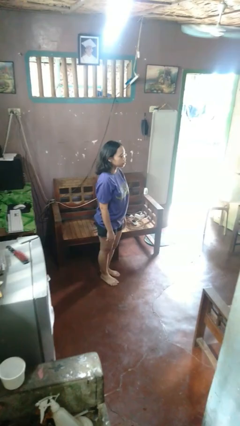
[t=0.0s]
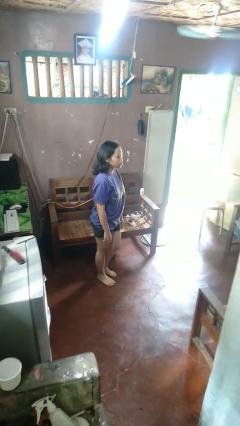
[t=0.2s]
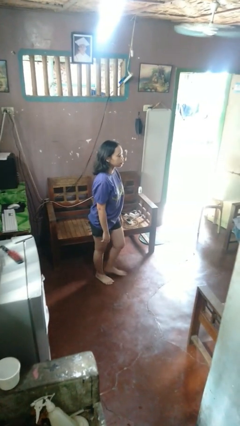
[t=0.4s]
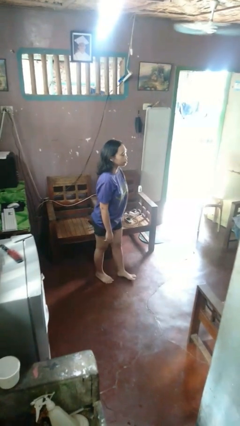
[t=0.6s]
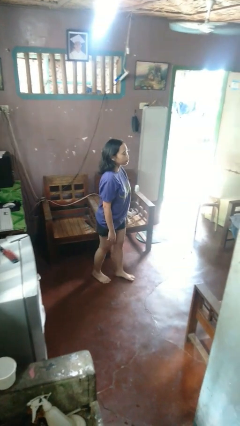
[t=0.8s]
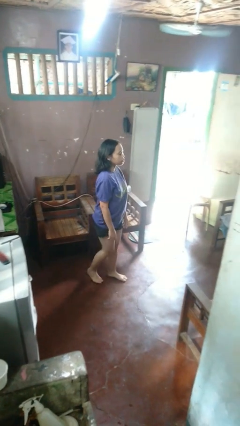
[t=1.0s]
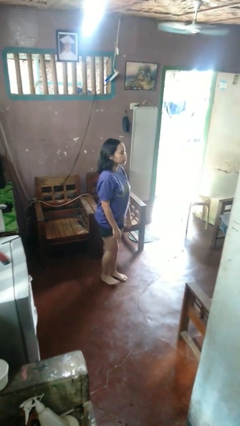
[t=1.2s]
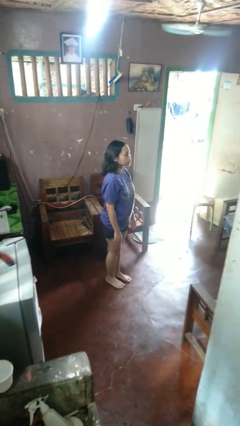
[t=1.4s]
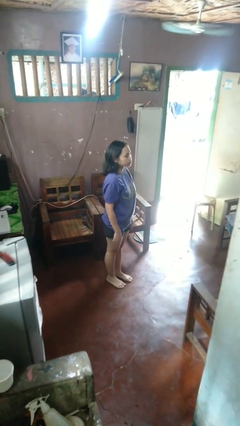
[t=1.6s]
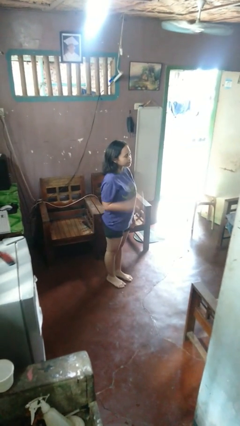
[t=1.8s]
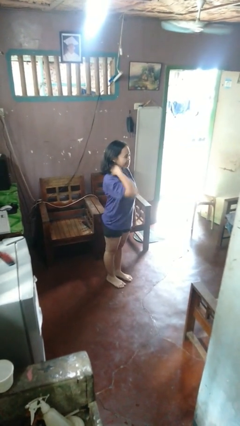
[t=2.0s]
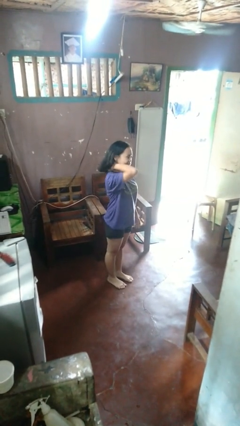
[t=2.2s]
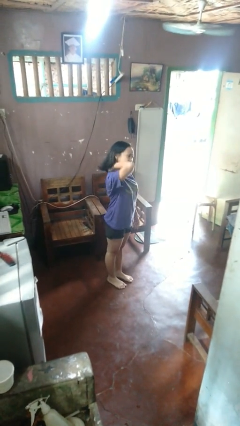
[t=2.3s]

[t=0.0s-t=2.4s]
person rubs neck

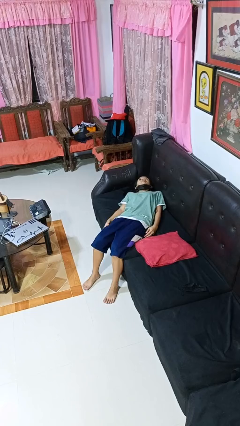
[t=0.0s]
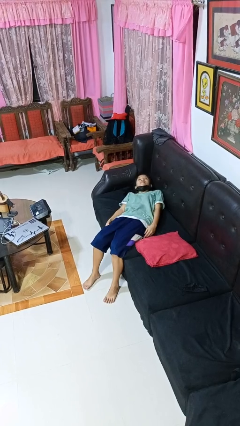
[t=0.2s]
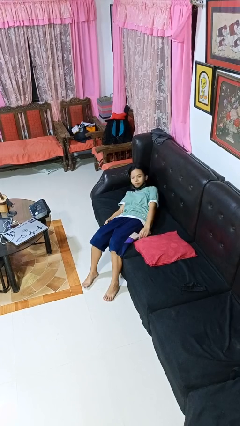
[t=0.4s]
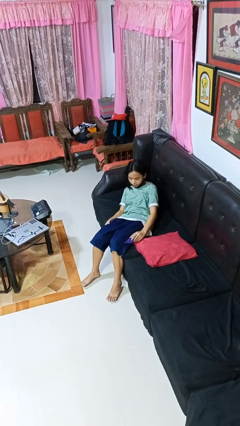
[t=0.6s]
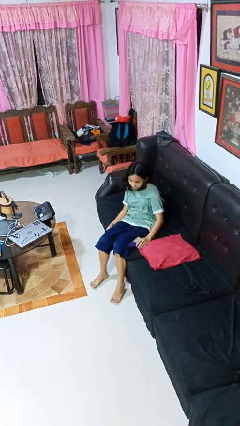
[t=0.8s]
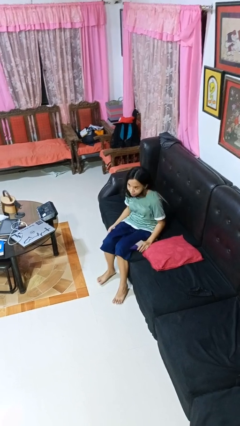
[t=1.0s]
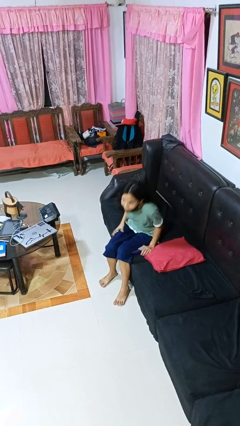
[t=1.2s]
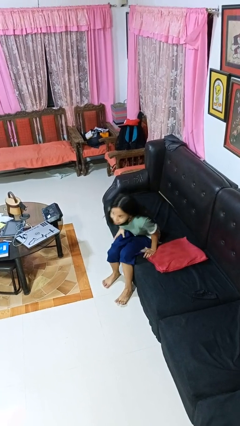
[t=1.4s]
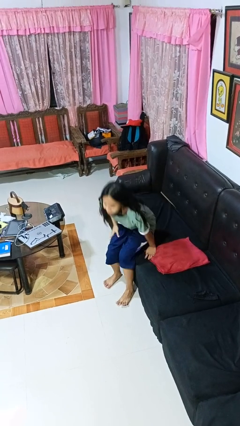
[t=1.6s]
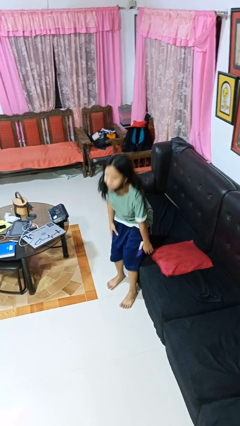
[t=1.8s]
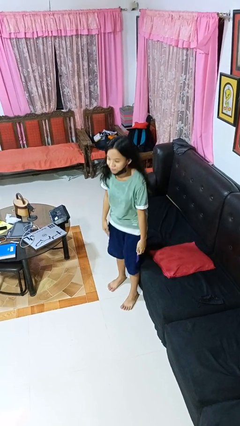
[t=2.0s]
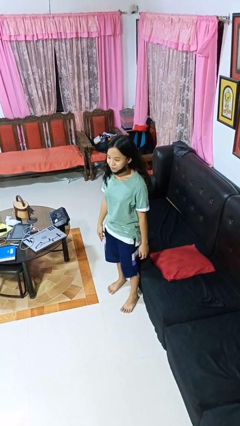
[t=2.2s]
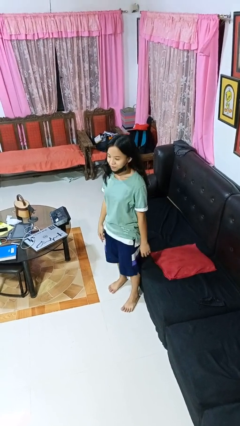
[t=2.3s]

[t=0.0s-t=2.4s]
person stands up

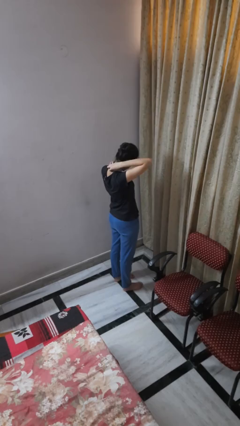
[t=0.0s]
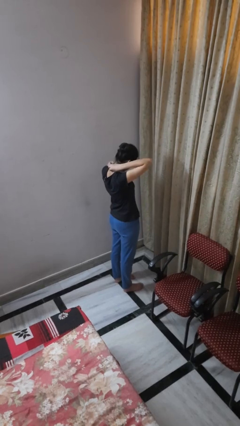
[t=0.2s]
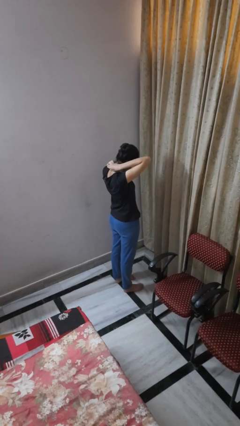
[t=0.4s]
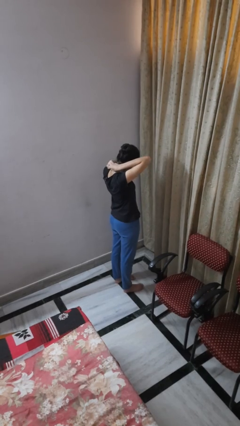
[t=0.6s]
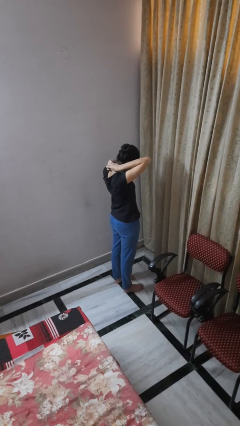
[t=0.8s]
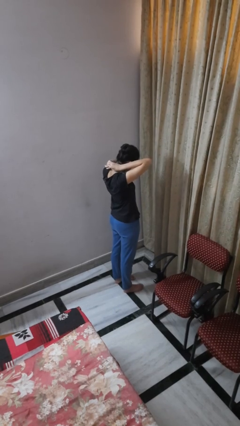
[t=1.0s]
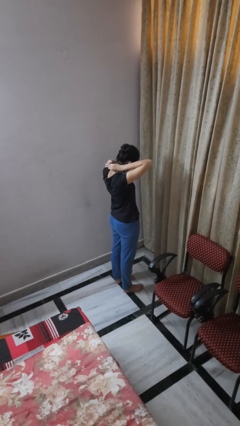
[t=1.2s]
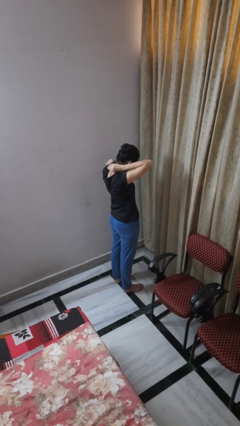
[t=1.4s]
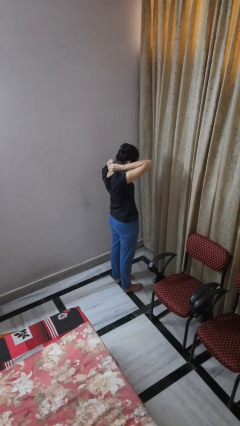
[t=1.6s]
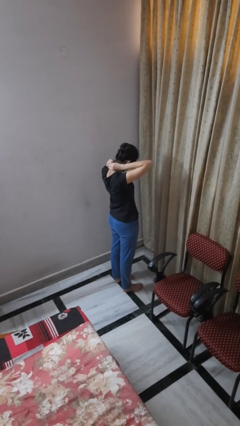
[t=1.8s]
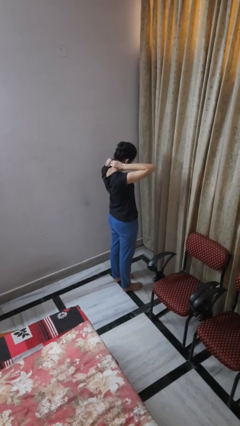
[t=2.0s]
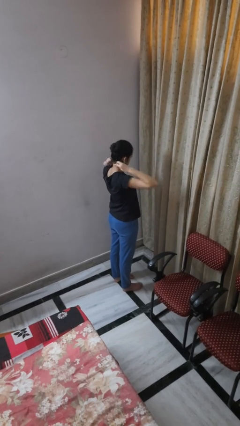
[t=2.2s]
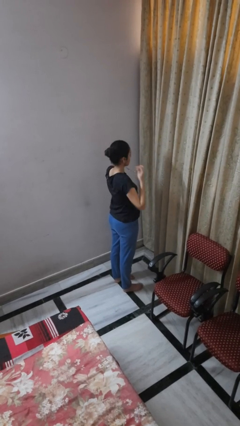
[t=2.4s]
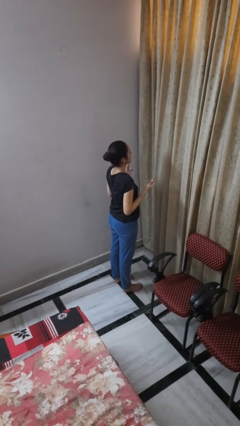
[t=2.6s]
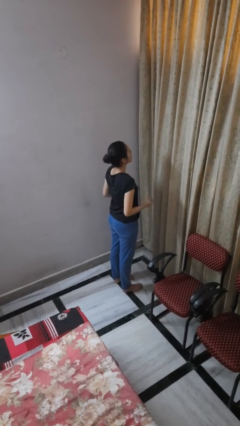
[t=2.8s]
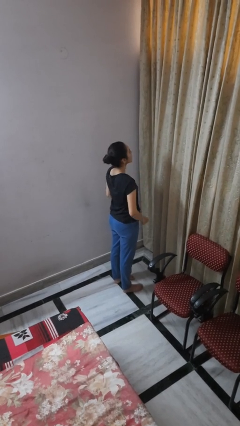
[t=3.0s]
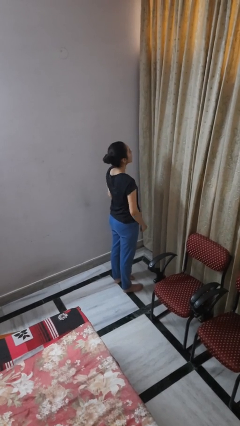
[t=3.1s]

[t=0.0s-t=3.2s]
person takes off necklace

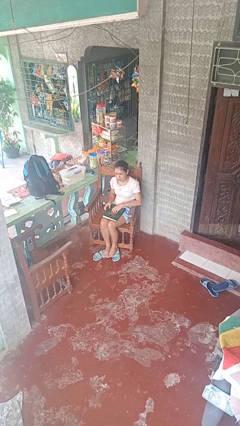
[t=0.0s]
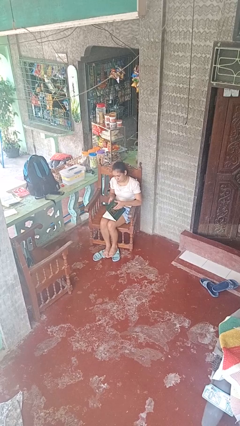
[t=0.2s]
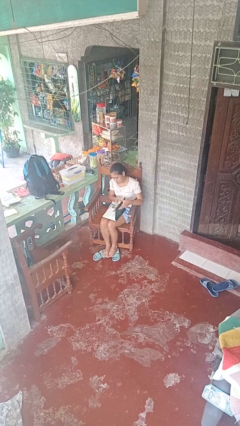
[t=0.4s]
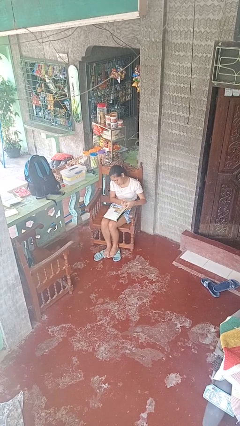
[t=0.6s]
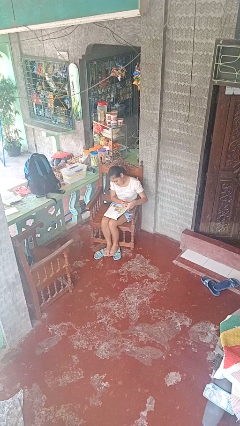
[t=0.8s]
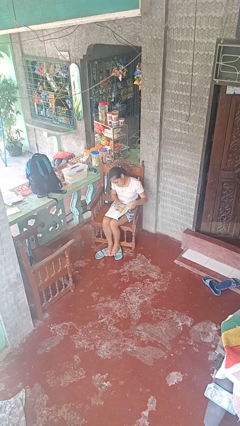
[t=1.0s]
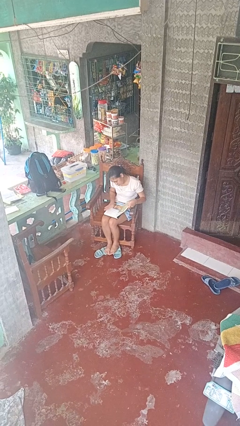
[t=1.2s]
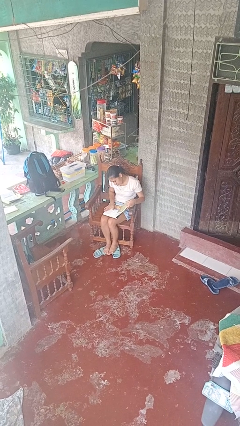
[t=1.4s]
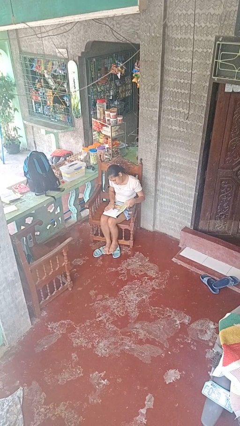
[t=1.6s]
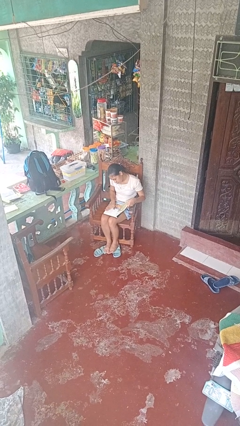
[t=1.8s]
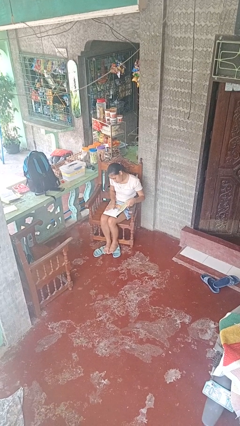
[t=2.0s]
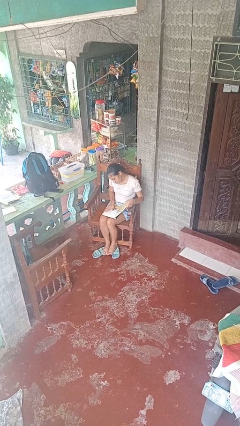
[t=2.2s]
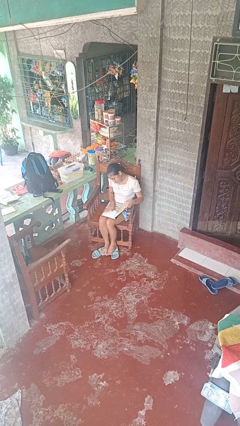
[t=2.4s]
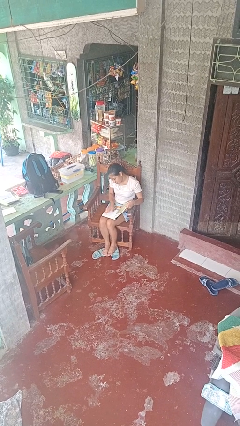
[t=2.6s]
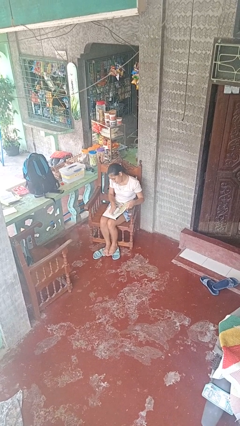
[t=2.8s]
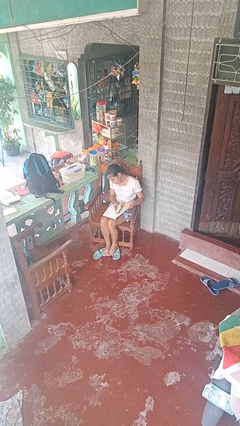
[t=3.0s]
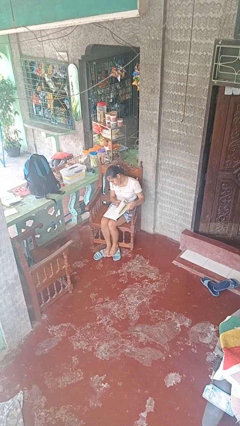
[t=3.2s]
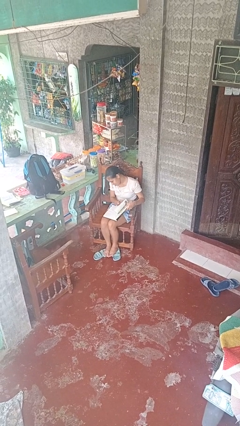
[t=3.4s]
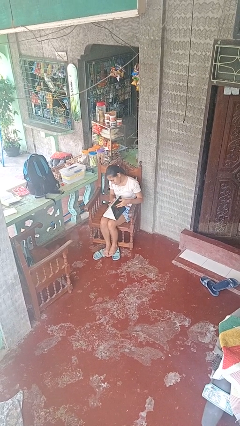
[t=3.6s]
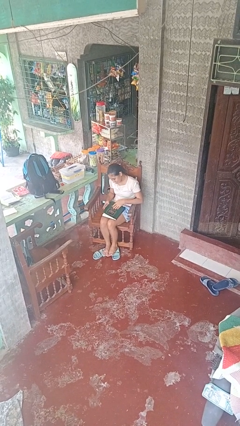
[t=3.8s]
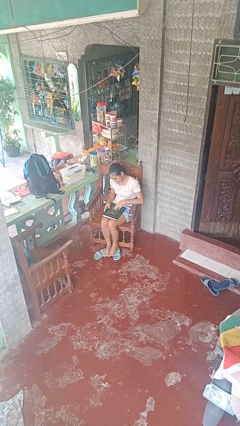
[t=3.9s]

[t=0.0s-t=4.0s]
person reads book

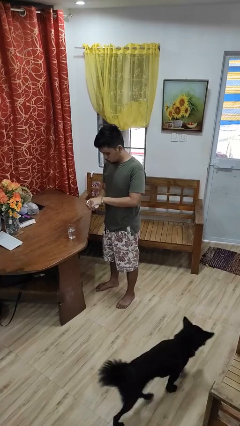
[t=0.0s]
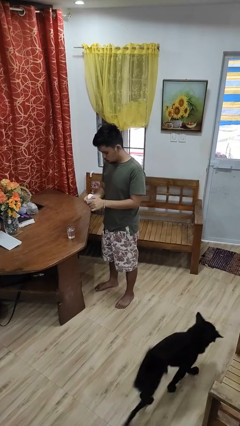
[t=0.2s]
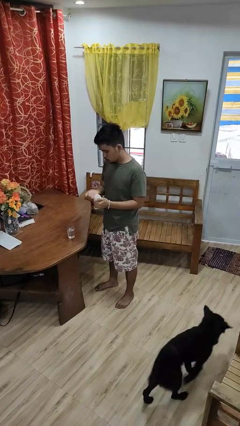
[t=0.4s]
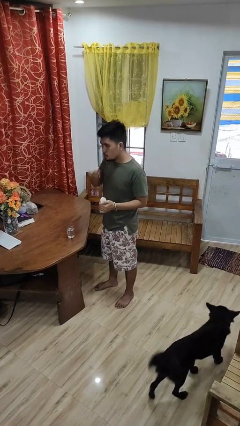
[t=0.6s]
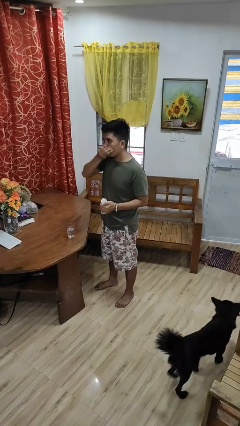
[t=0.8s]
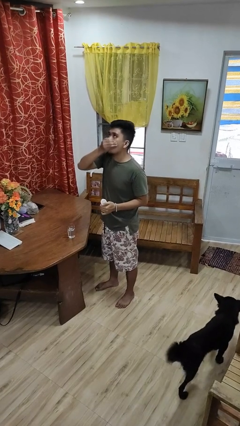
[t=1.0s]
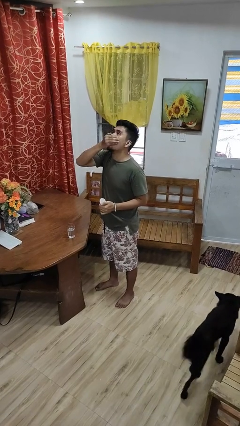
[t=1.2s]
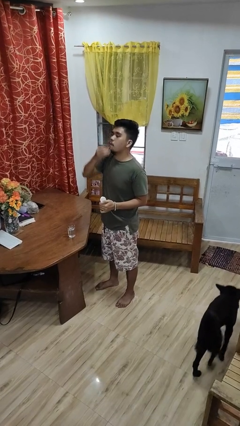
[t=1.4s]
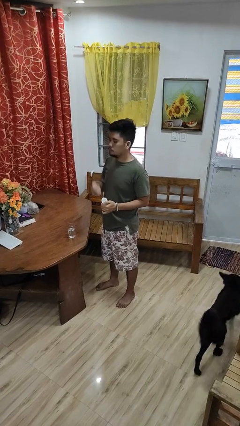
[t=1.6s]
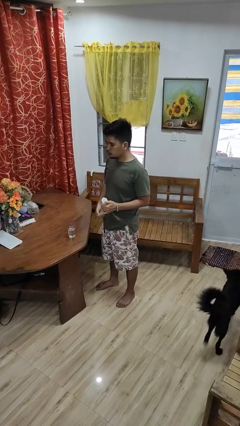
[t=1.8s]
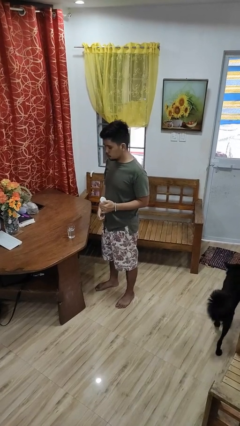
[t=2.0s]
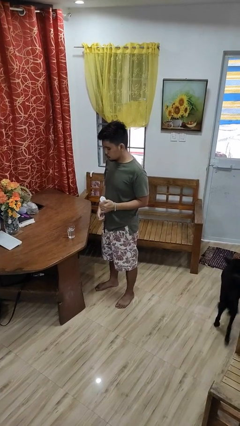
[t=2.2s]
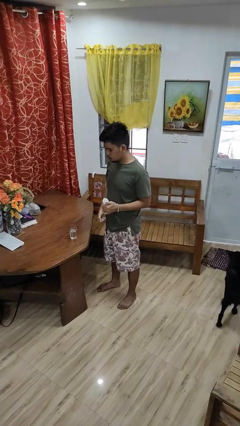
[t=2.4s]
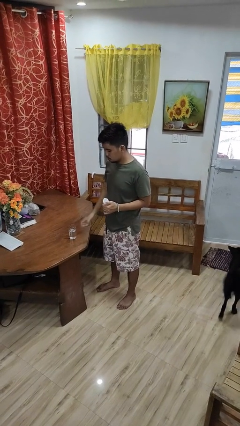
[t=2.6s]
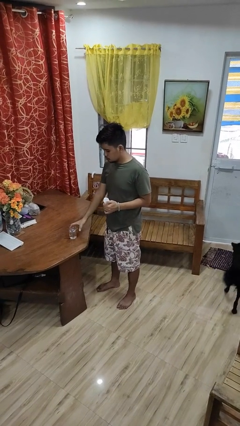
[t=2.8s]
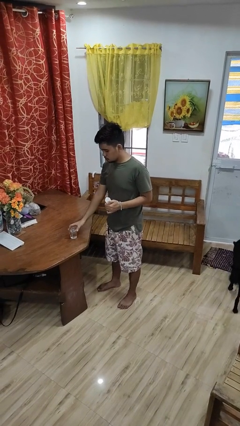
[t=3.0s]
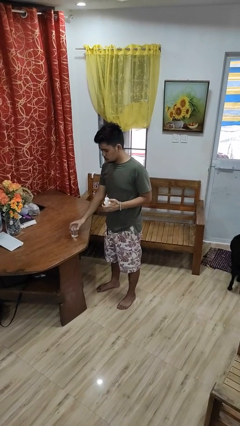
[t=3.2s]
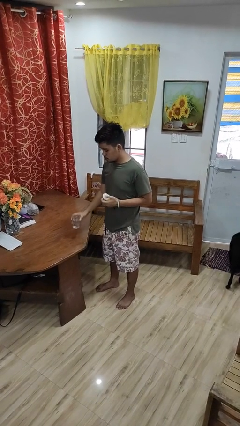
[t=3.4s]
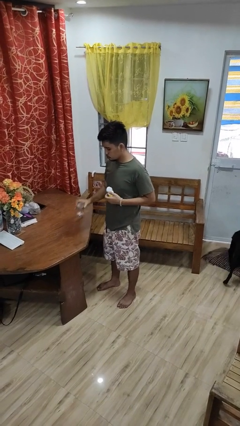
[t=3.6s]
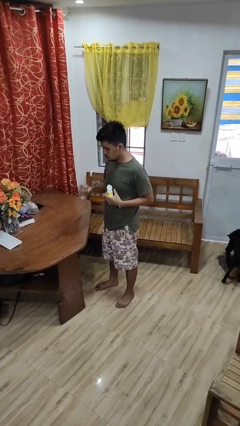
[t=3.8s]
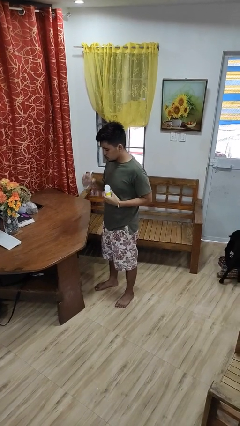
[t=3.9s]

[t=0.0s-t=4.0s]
person takes medicine pills

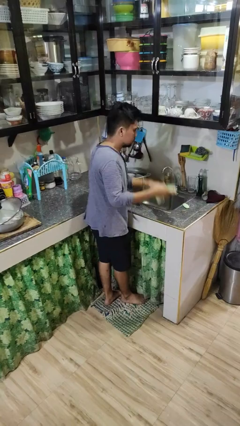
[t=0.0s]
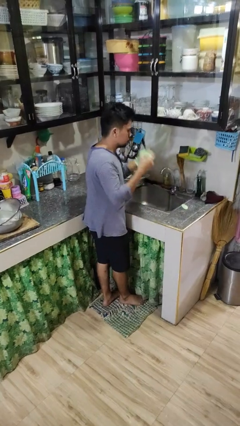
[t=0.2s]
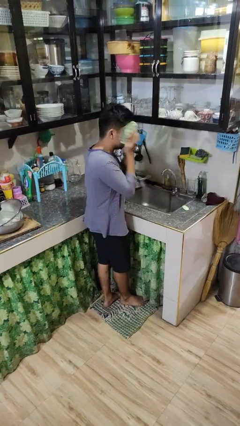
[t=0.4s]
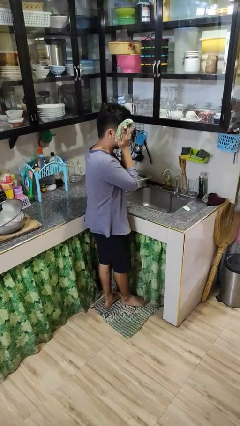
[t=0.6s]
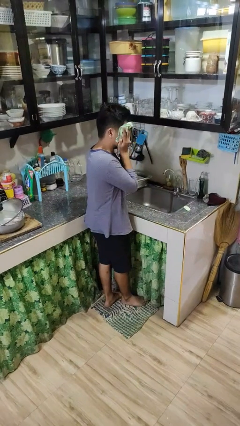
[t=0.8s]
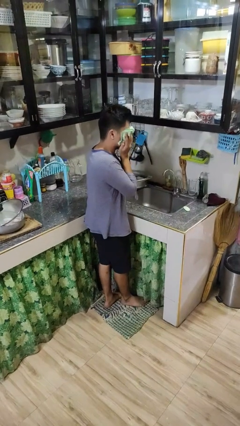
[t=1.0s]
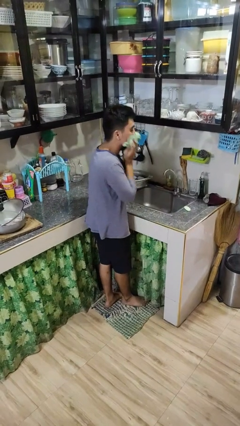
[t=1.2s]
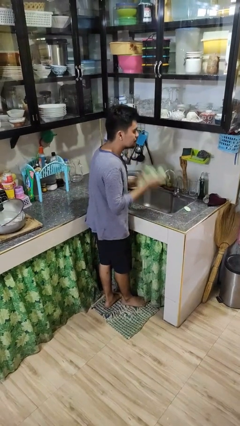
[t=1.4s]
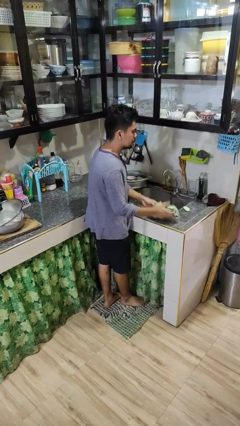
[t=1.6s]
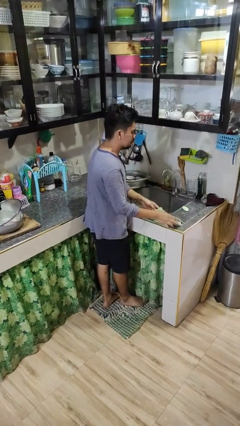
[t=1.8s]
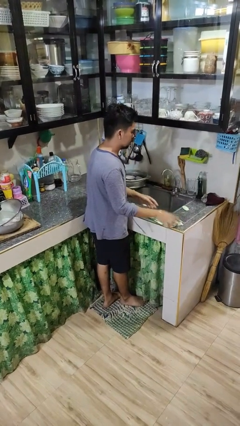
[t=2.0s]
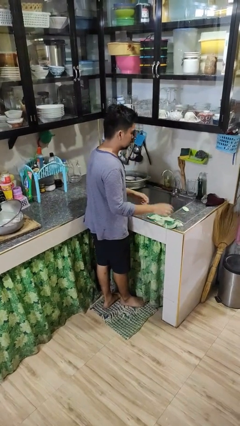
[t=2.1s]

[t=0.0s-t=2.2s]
person dries face with towel
